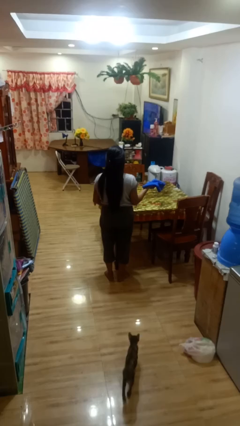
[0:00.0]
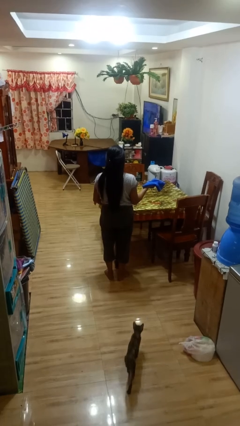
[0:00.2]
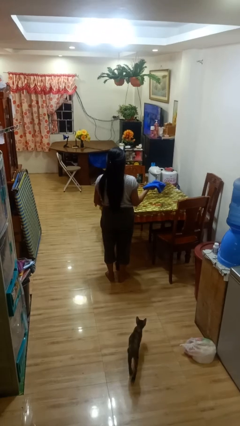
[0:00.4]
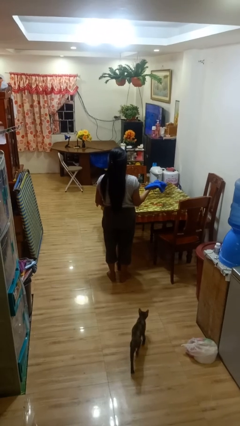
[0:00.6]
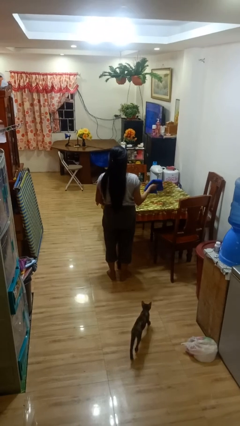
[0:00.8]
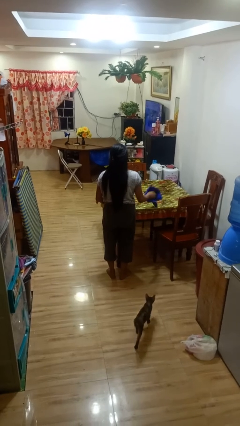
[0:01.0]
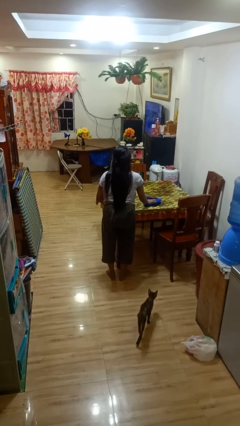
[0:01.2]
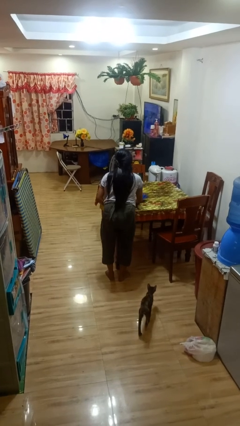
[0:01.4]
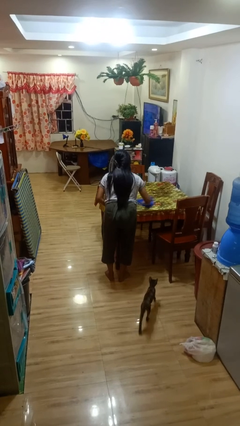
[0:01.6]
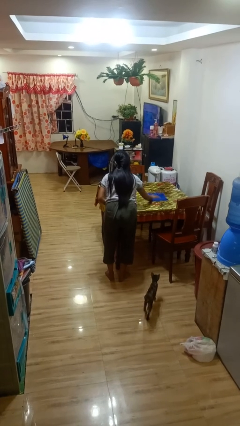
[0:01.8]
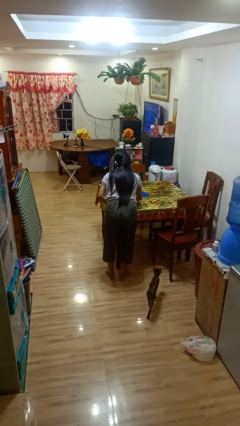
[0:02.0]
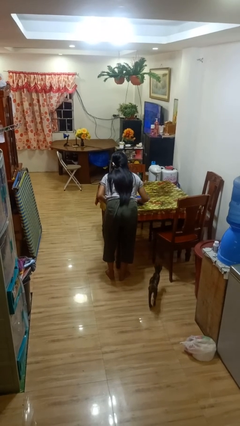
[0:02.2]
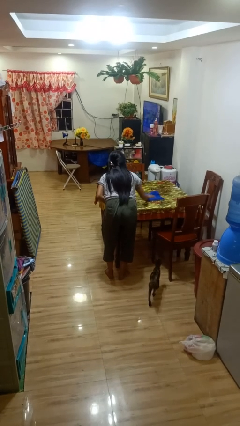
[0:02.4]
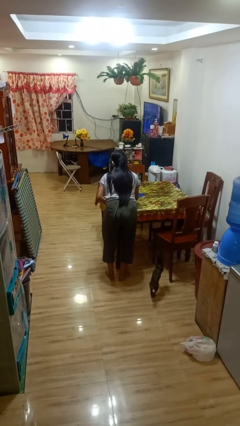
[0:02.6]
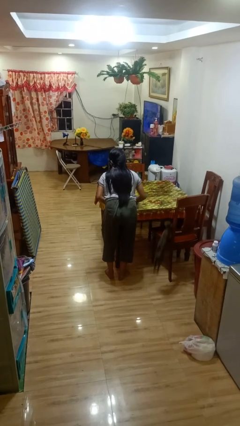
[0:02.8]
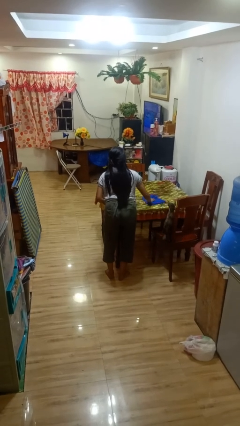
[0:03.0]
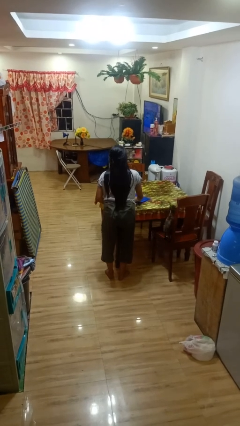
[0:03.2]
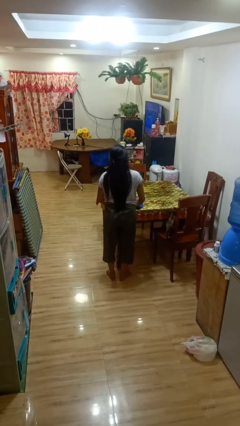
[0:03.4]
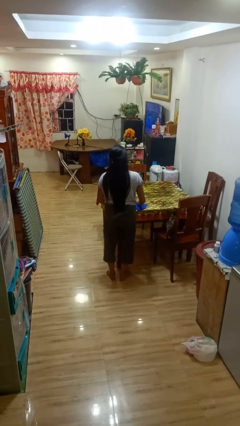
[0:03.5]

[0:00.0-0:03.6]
person cleans table with rag

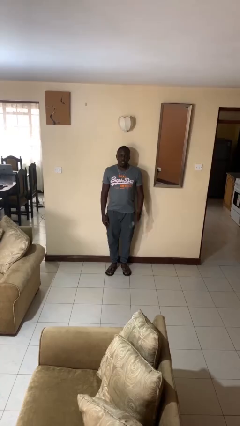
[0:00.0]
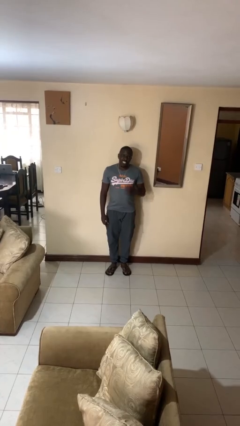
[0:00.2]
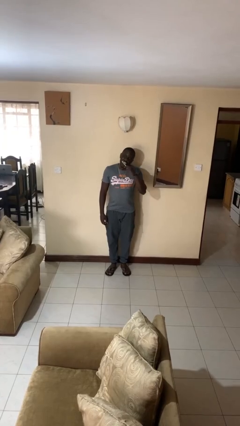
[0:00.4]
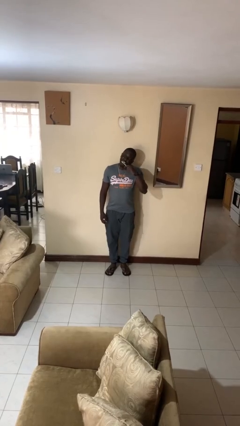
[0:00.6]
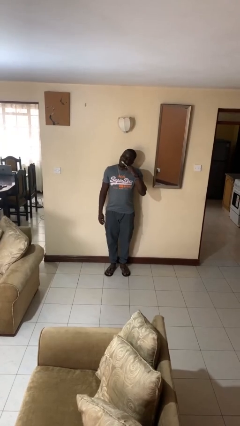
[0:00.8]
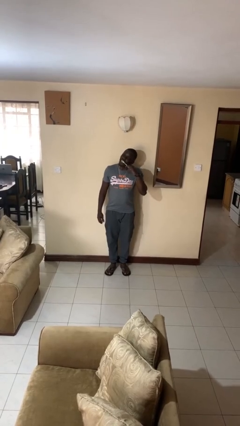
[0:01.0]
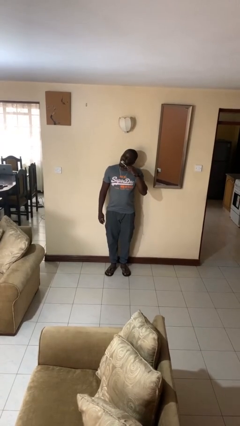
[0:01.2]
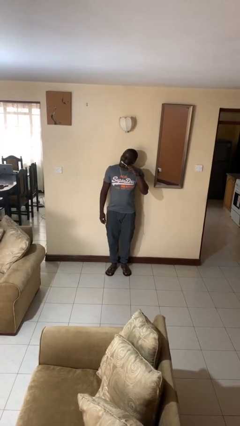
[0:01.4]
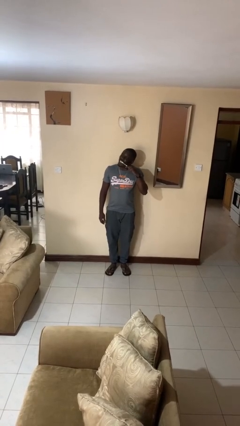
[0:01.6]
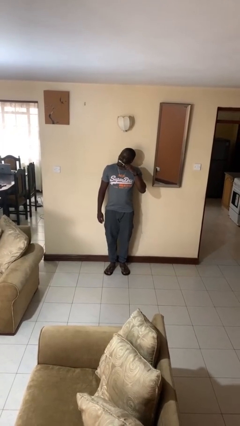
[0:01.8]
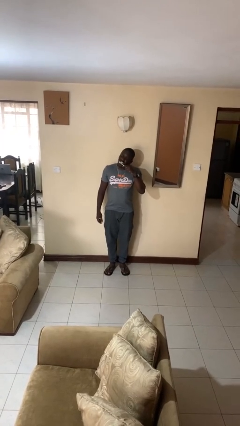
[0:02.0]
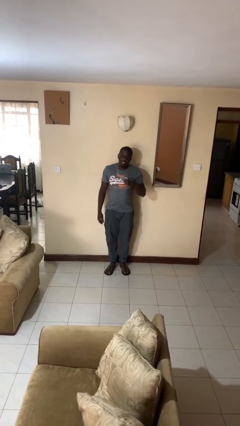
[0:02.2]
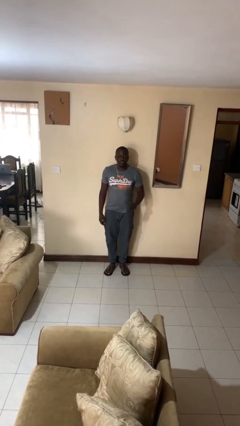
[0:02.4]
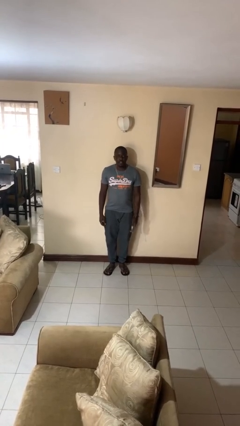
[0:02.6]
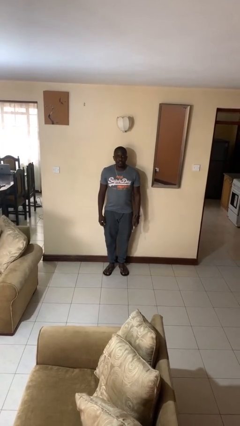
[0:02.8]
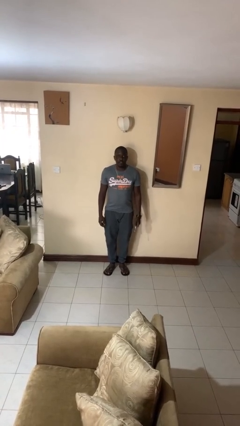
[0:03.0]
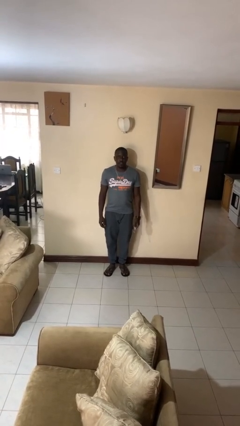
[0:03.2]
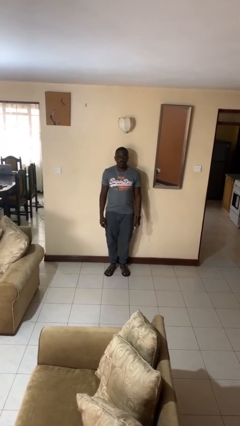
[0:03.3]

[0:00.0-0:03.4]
person brushes teeth

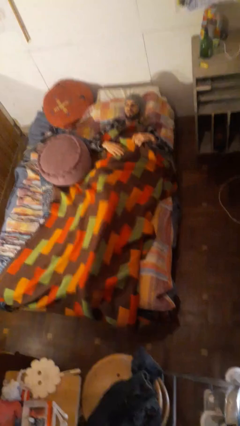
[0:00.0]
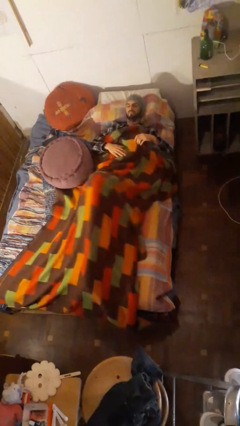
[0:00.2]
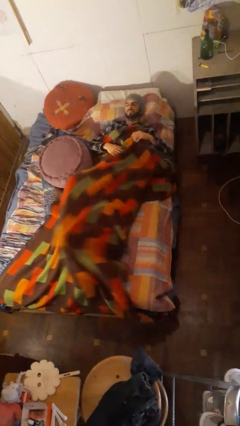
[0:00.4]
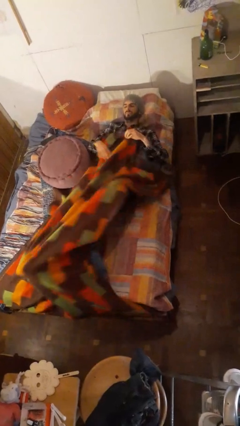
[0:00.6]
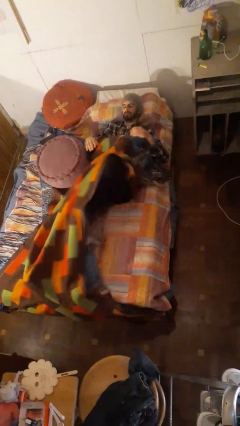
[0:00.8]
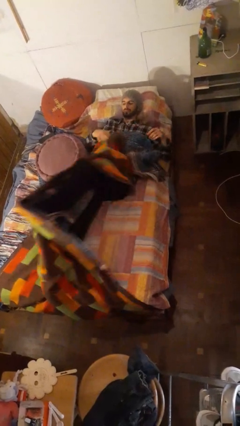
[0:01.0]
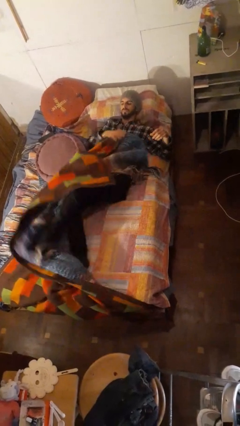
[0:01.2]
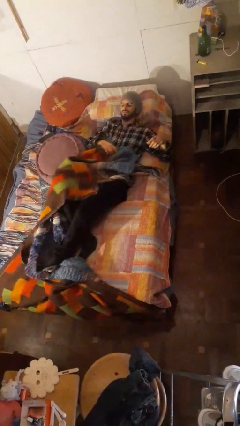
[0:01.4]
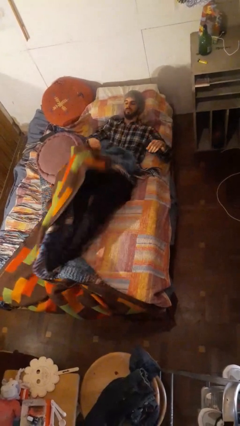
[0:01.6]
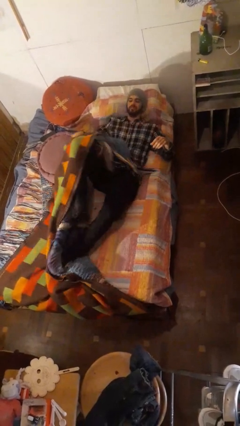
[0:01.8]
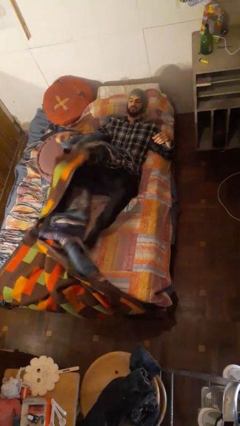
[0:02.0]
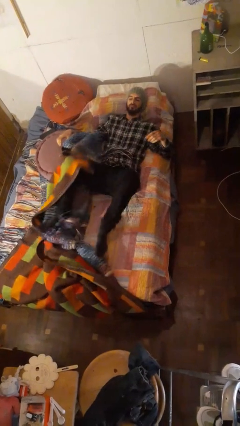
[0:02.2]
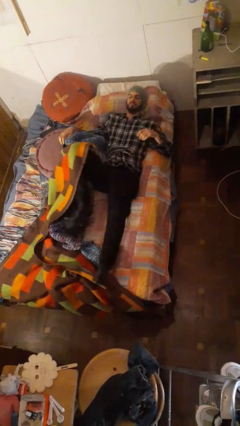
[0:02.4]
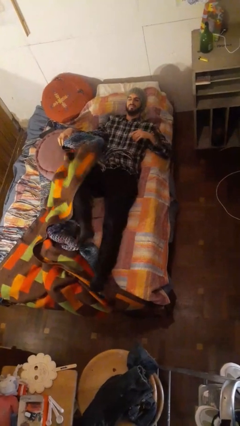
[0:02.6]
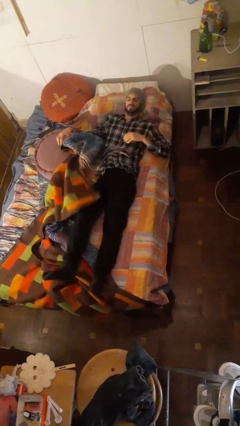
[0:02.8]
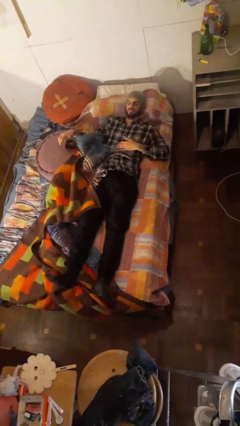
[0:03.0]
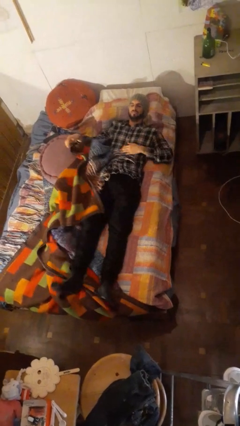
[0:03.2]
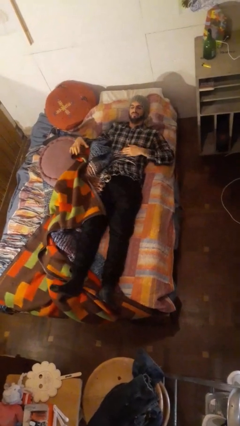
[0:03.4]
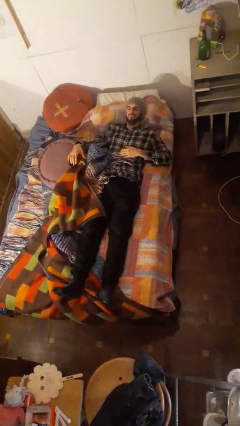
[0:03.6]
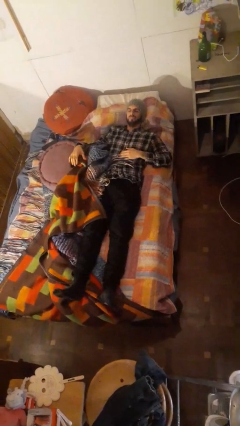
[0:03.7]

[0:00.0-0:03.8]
person uncovers with bedsheets

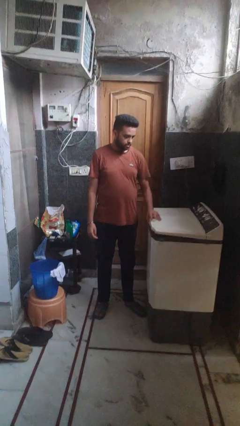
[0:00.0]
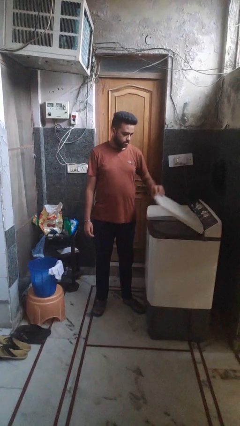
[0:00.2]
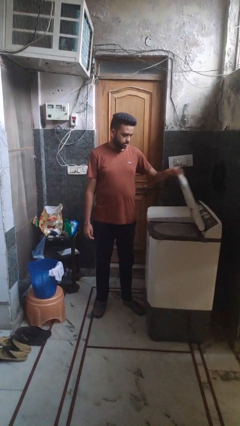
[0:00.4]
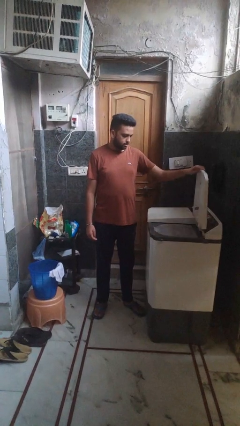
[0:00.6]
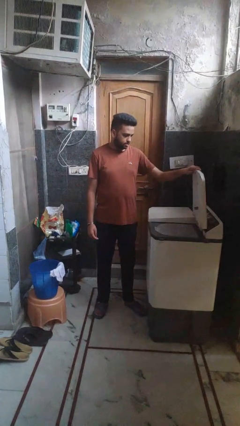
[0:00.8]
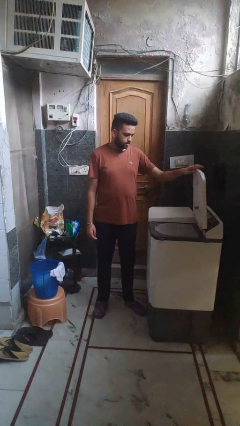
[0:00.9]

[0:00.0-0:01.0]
person opens clothes washer

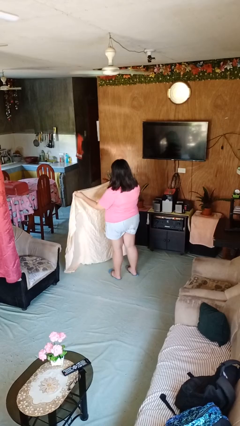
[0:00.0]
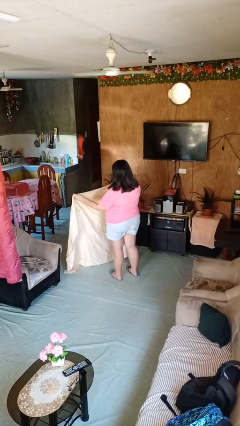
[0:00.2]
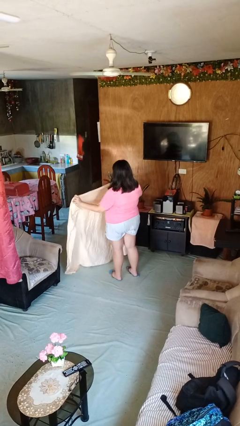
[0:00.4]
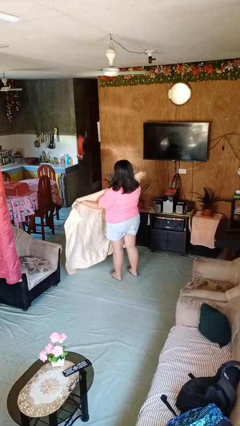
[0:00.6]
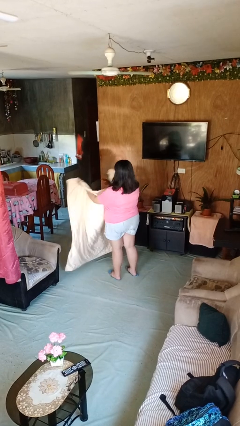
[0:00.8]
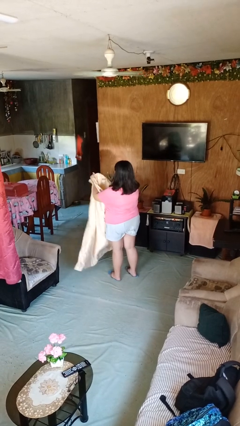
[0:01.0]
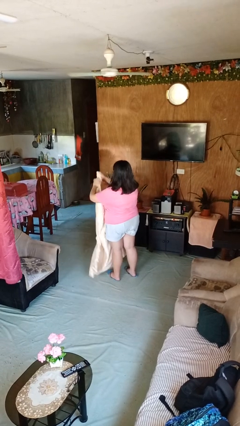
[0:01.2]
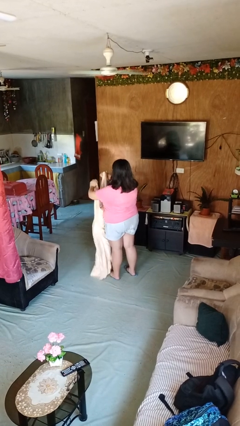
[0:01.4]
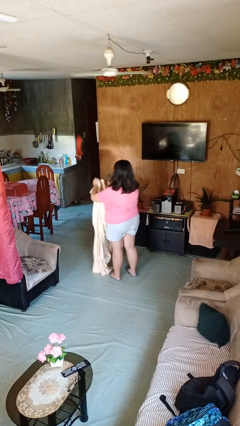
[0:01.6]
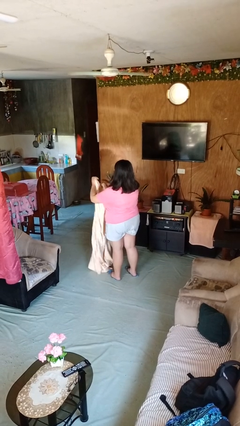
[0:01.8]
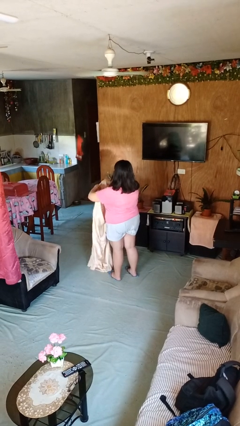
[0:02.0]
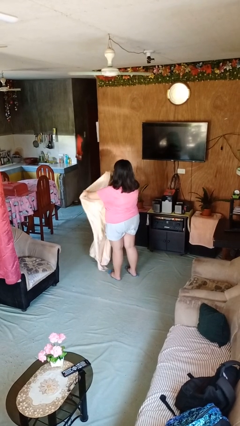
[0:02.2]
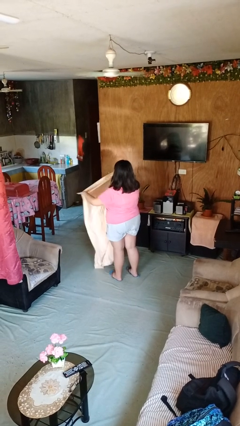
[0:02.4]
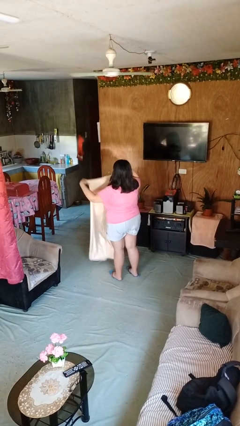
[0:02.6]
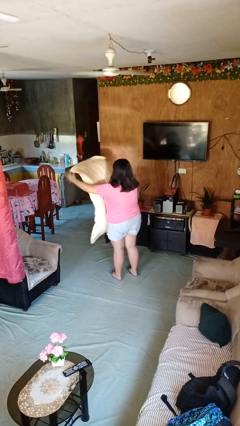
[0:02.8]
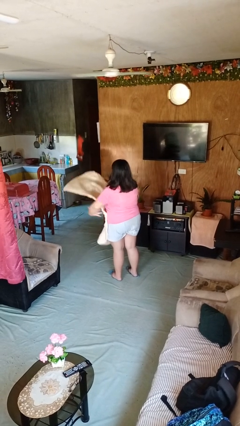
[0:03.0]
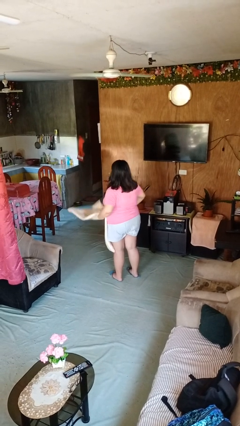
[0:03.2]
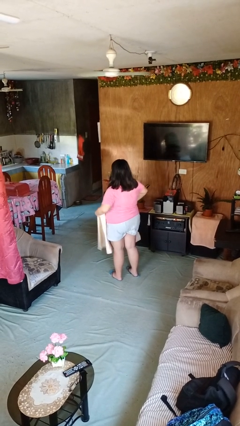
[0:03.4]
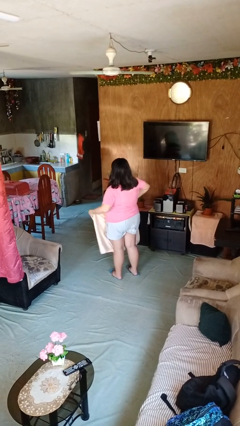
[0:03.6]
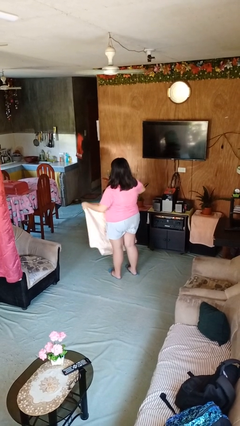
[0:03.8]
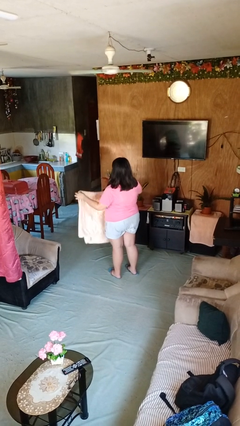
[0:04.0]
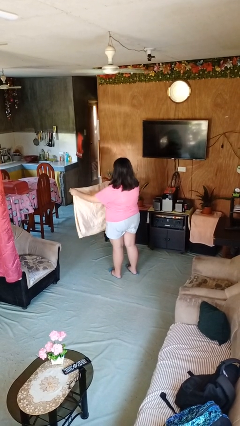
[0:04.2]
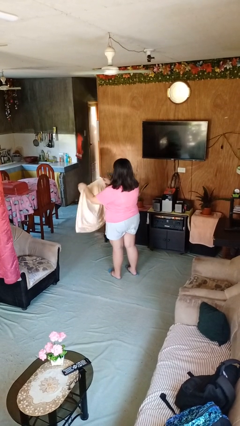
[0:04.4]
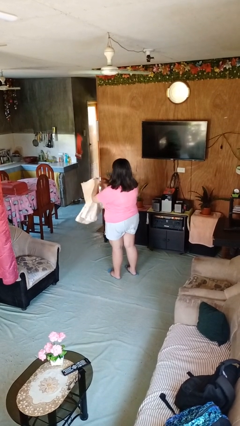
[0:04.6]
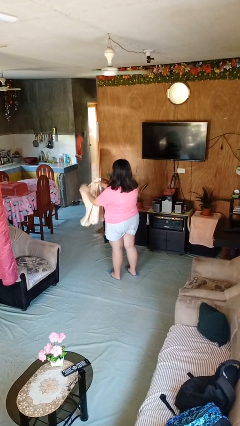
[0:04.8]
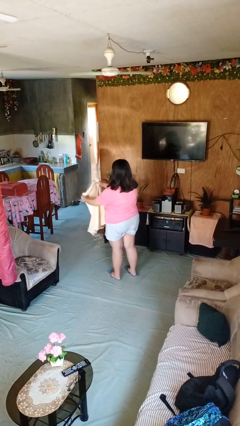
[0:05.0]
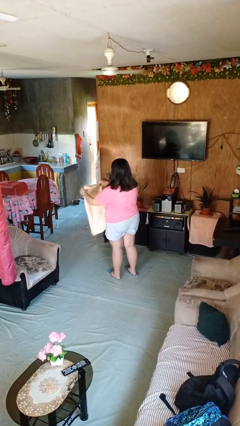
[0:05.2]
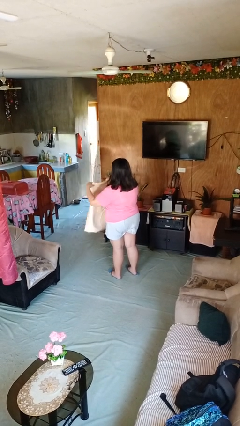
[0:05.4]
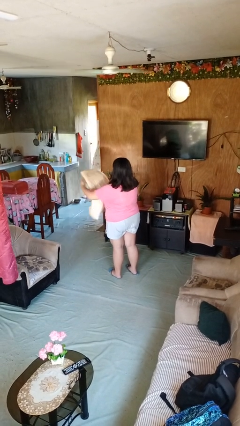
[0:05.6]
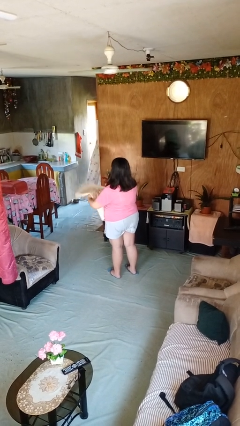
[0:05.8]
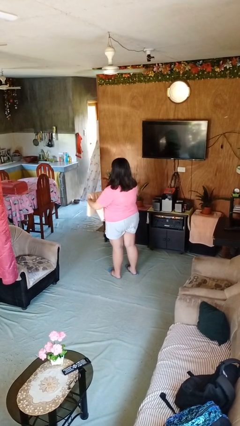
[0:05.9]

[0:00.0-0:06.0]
person folds blanket

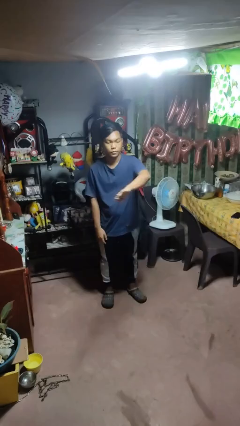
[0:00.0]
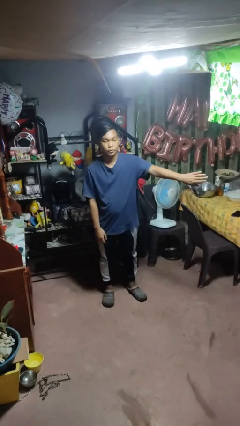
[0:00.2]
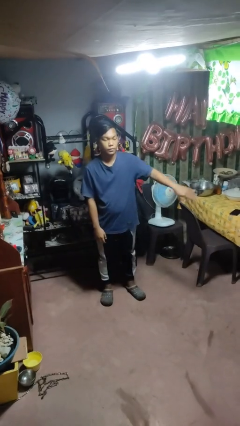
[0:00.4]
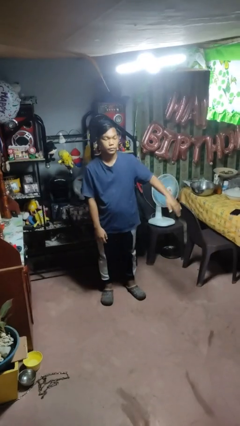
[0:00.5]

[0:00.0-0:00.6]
person gestures swipe left
